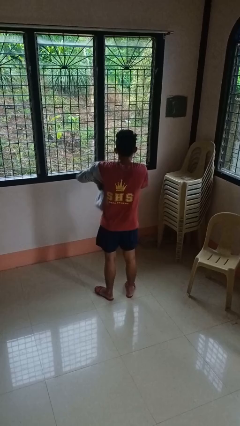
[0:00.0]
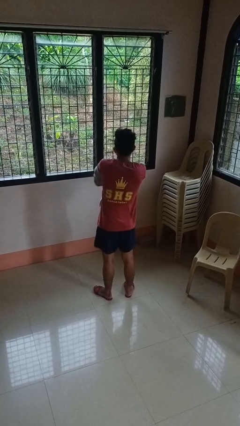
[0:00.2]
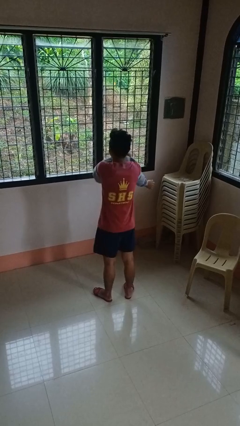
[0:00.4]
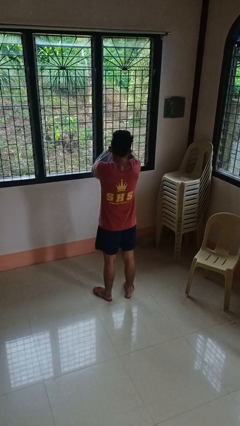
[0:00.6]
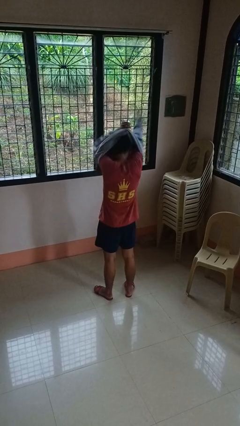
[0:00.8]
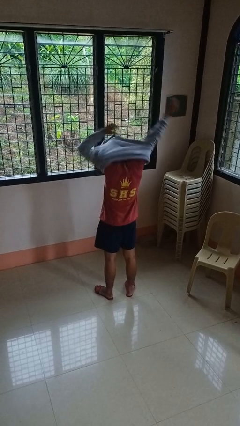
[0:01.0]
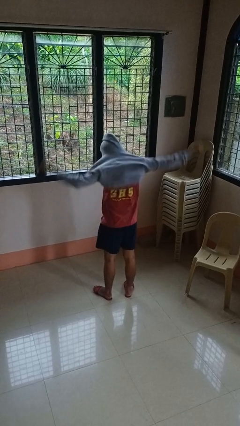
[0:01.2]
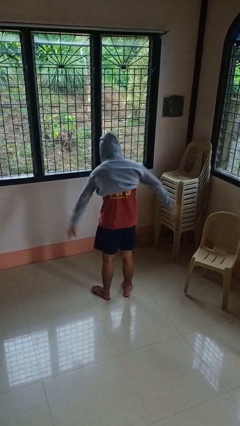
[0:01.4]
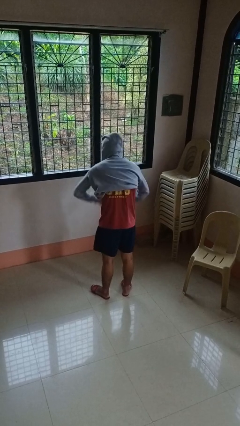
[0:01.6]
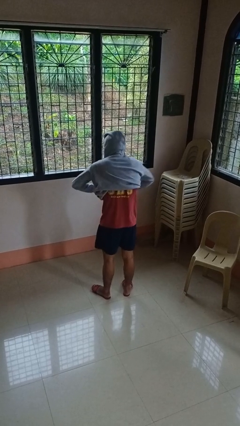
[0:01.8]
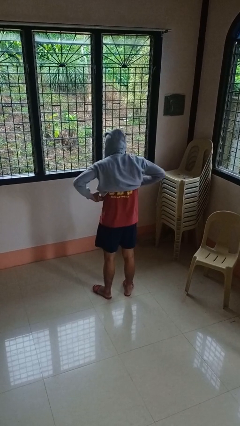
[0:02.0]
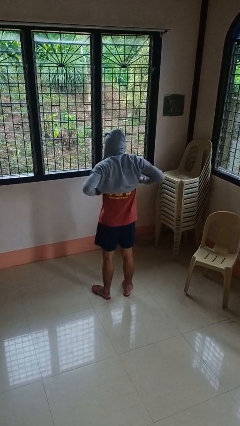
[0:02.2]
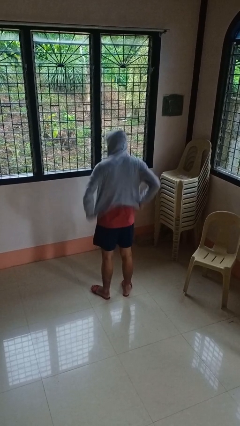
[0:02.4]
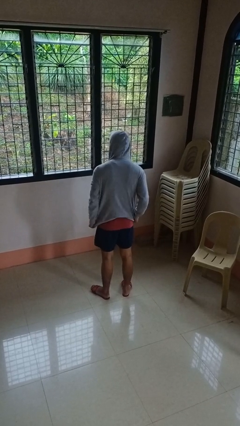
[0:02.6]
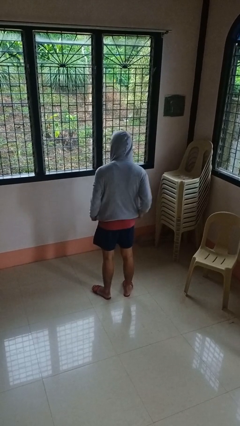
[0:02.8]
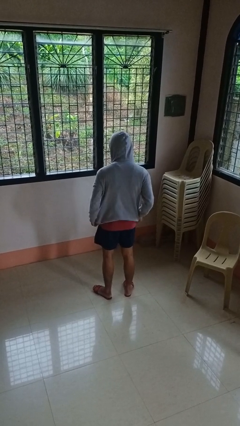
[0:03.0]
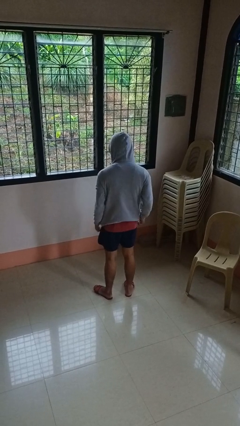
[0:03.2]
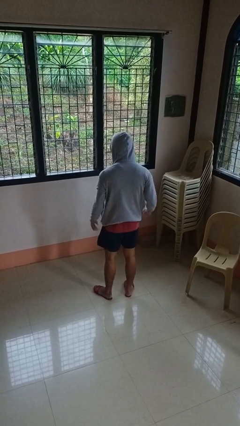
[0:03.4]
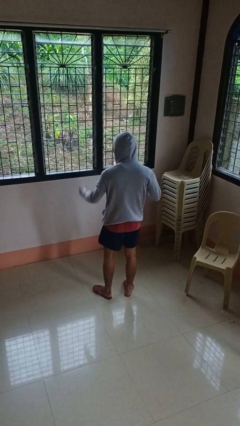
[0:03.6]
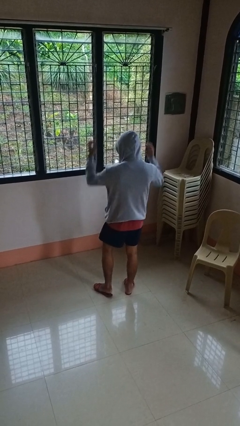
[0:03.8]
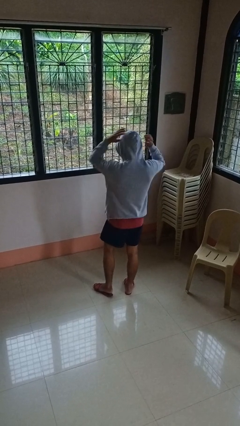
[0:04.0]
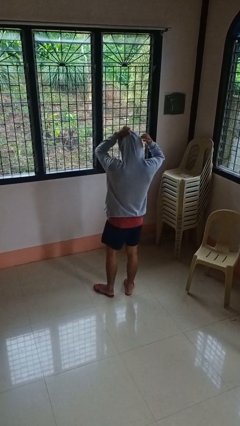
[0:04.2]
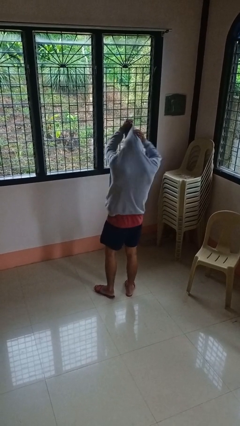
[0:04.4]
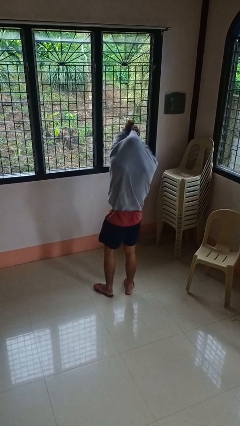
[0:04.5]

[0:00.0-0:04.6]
person puts on hoodie

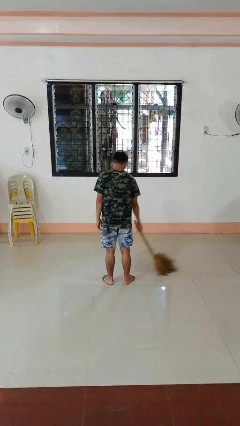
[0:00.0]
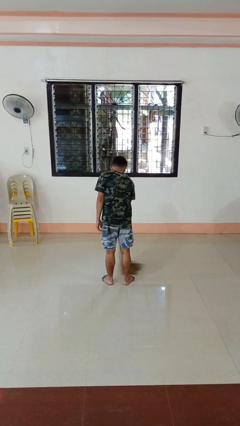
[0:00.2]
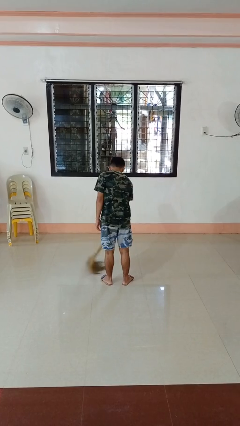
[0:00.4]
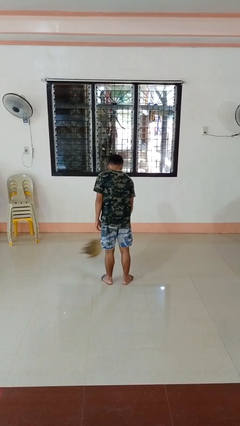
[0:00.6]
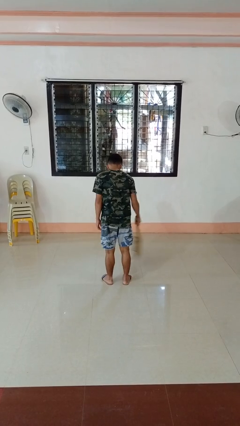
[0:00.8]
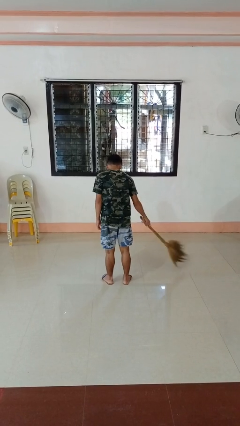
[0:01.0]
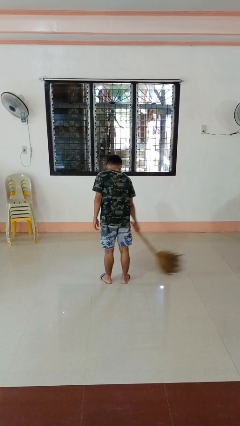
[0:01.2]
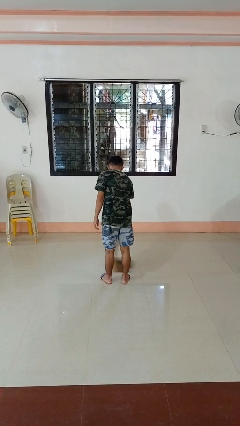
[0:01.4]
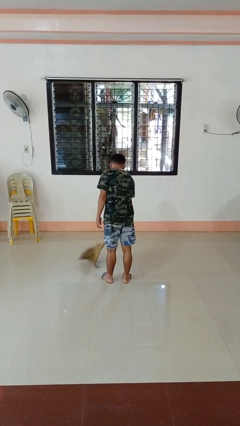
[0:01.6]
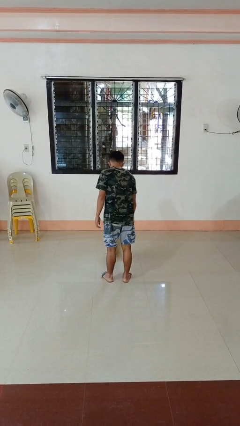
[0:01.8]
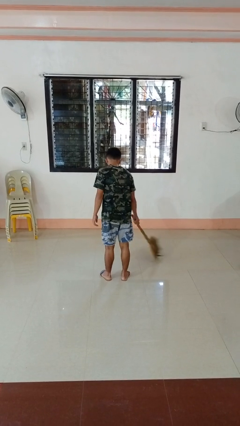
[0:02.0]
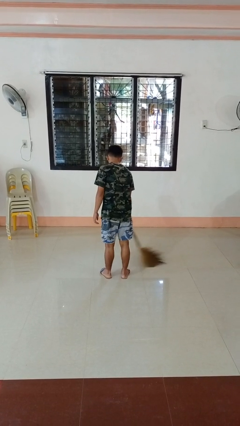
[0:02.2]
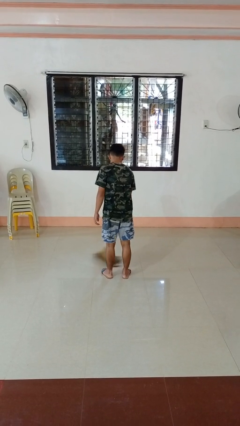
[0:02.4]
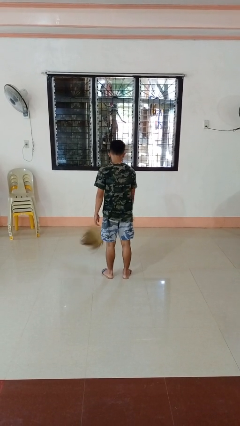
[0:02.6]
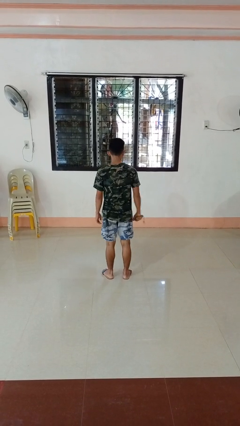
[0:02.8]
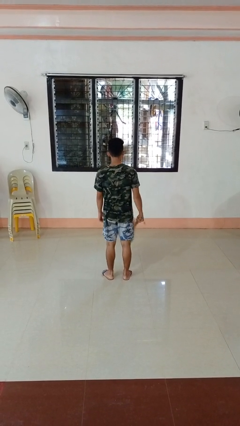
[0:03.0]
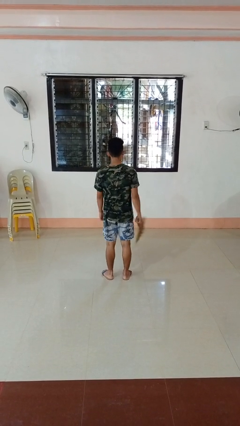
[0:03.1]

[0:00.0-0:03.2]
person sweeps floor

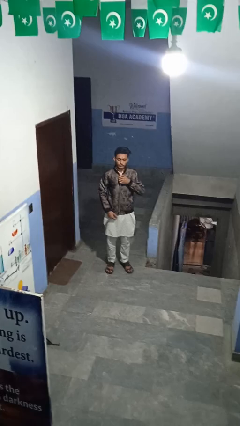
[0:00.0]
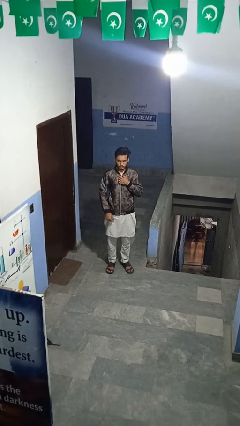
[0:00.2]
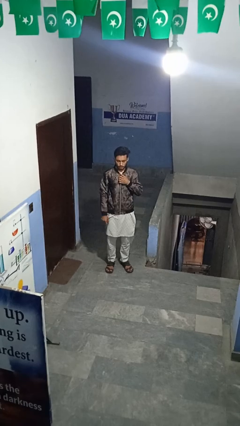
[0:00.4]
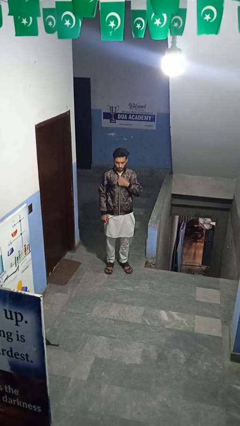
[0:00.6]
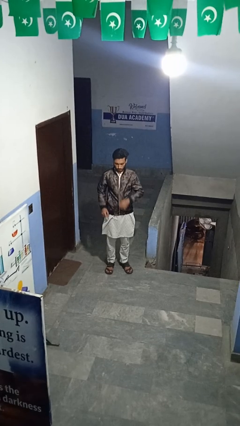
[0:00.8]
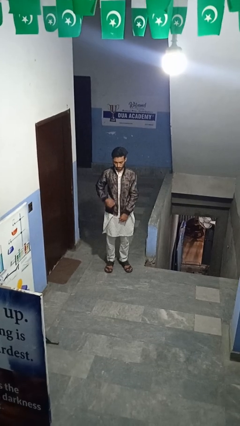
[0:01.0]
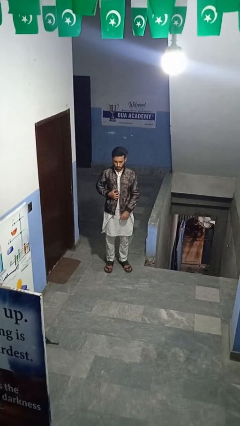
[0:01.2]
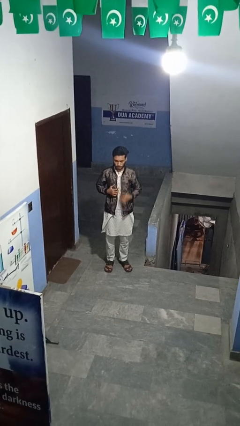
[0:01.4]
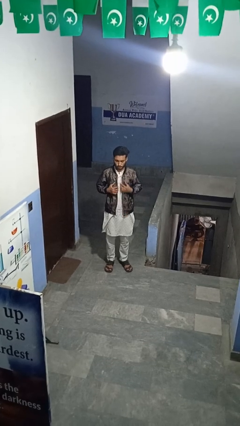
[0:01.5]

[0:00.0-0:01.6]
person unzips jacket

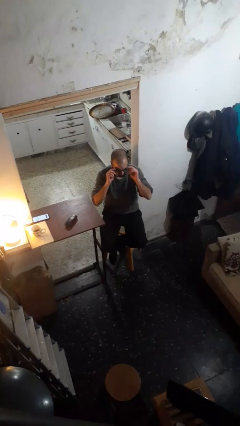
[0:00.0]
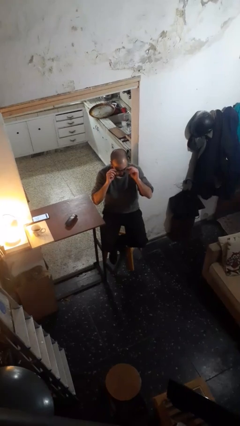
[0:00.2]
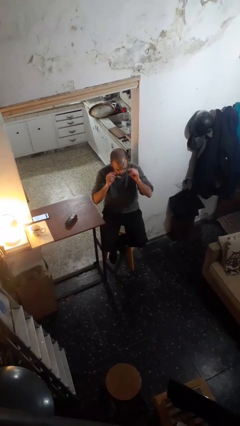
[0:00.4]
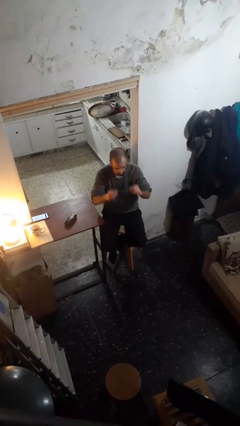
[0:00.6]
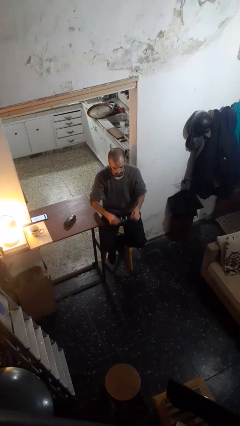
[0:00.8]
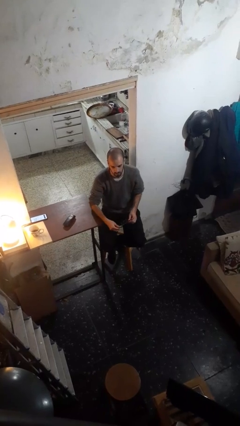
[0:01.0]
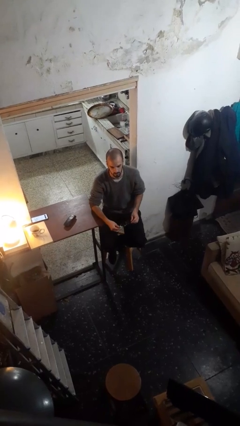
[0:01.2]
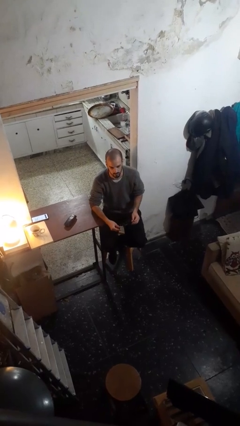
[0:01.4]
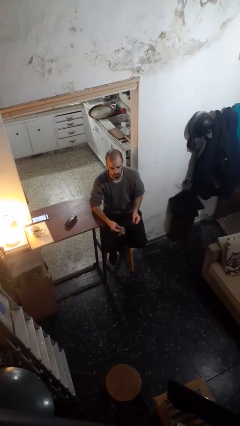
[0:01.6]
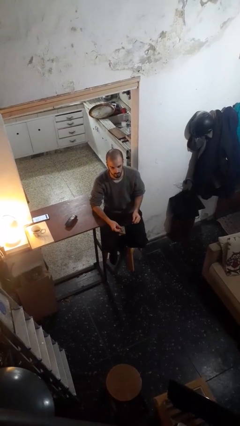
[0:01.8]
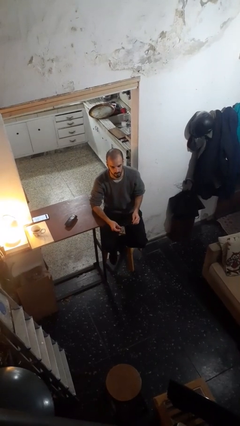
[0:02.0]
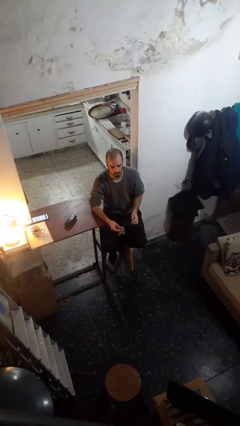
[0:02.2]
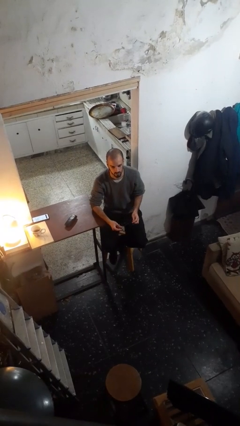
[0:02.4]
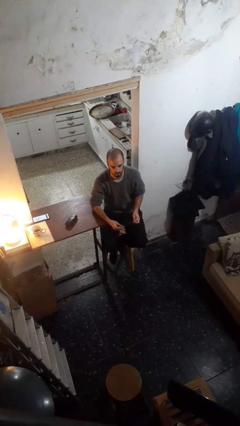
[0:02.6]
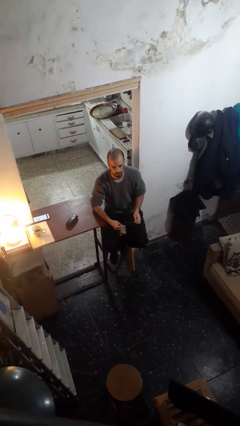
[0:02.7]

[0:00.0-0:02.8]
person takes off glasses

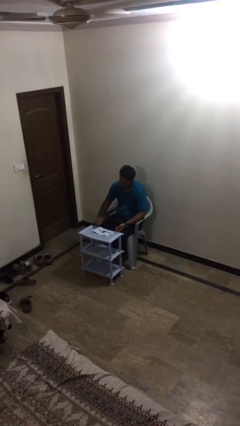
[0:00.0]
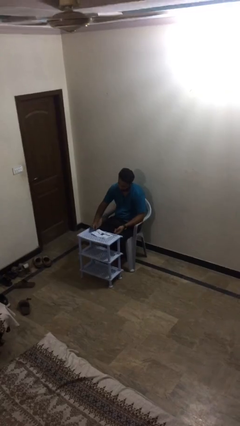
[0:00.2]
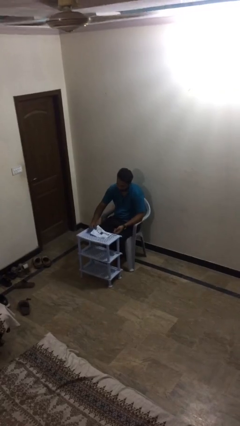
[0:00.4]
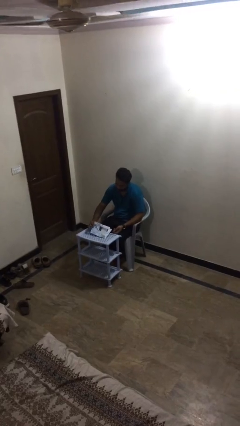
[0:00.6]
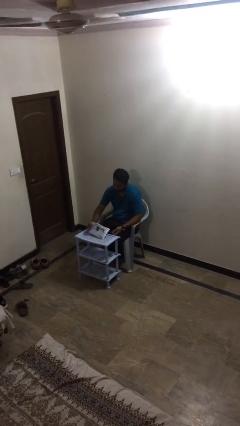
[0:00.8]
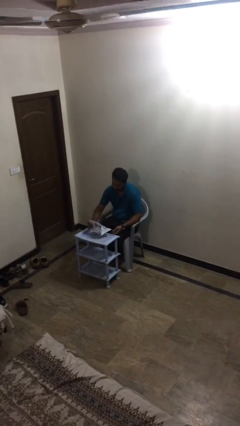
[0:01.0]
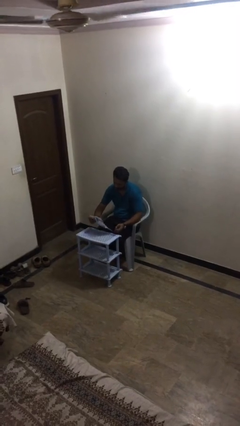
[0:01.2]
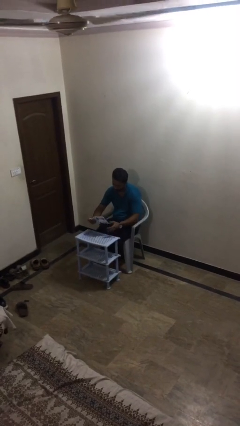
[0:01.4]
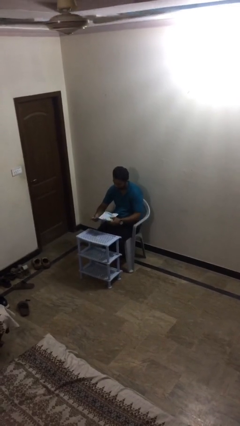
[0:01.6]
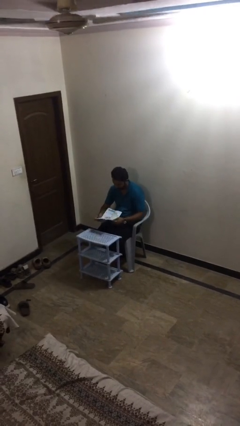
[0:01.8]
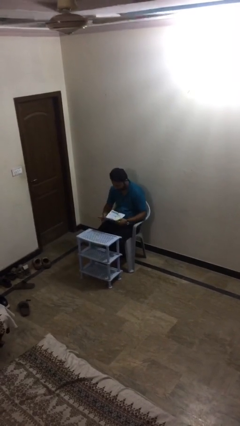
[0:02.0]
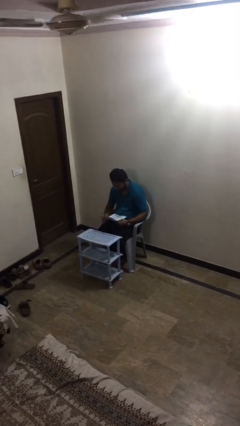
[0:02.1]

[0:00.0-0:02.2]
person picks up object from table

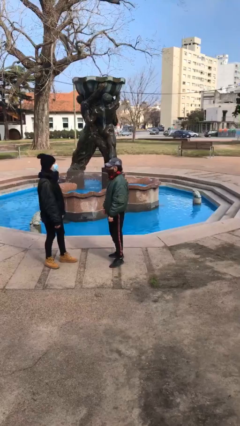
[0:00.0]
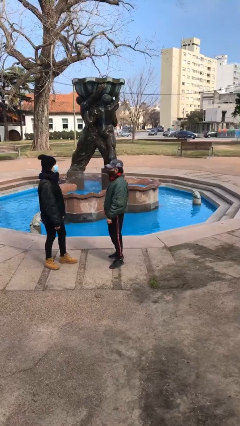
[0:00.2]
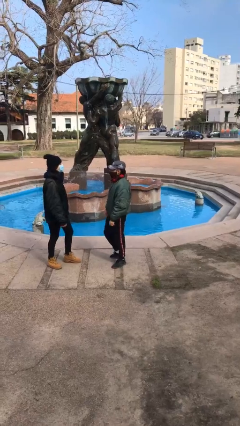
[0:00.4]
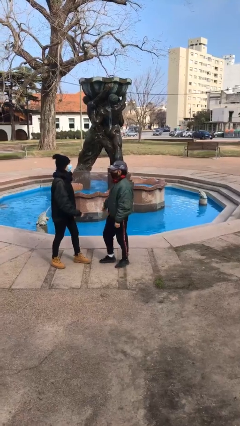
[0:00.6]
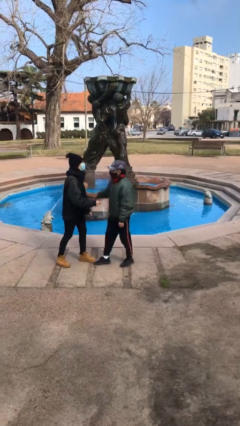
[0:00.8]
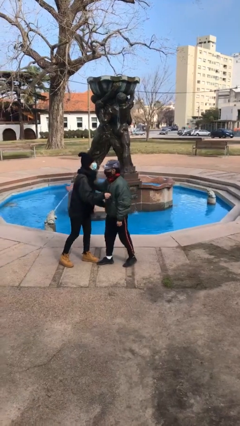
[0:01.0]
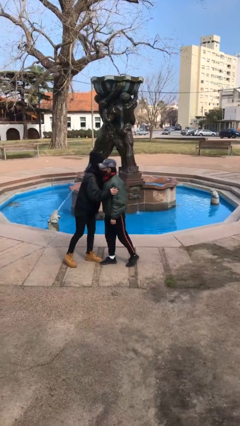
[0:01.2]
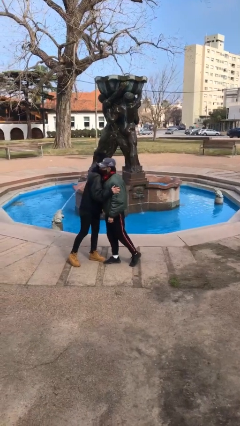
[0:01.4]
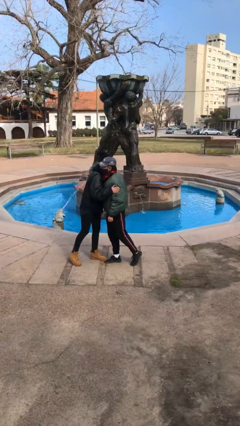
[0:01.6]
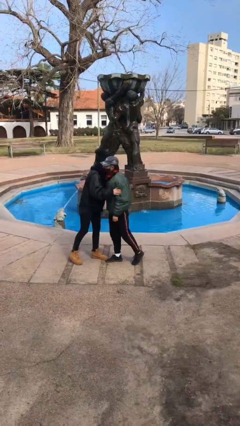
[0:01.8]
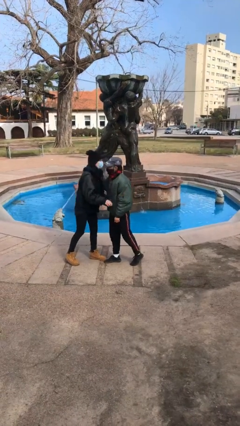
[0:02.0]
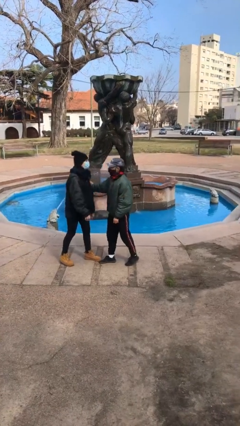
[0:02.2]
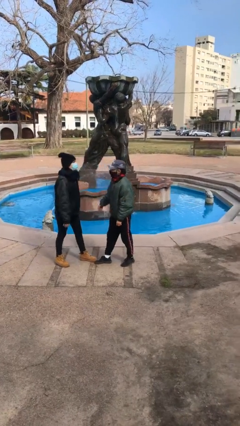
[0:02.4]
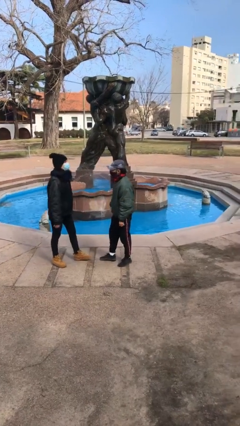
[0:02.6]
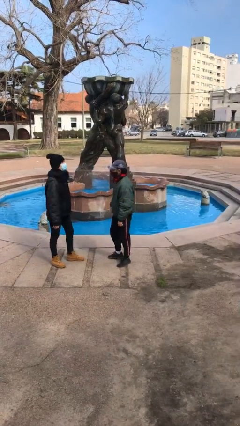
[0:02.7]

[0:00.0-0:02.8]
person kisses cheek of person
